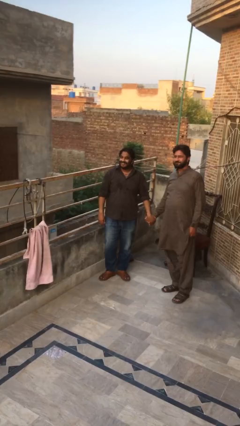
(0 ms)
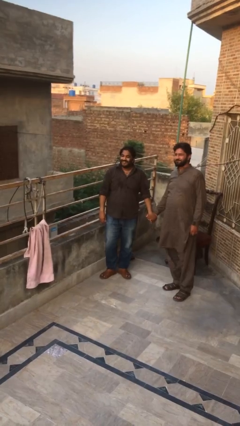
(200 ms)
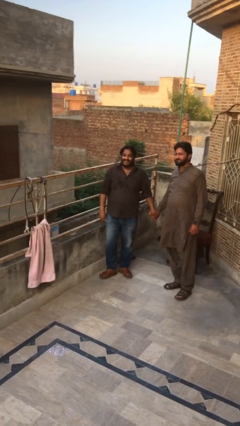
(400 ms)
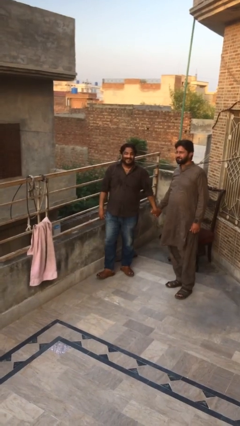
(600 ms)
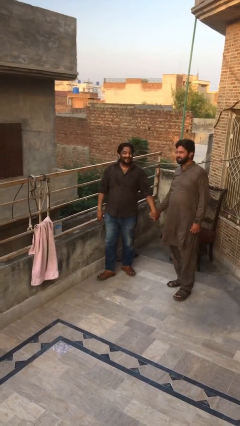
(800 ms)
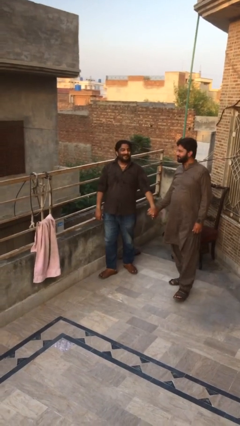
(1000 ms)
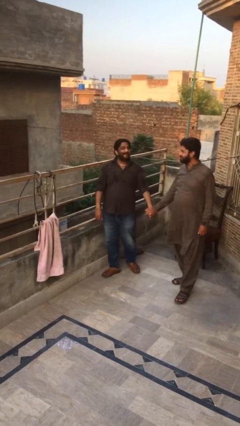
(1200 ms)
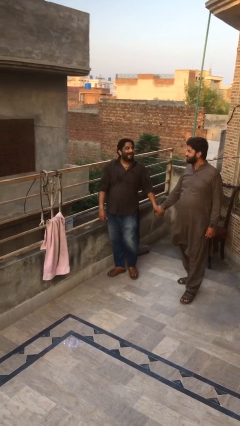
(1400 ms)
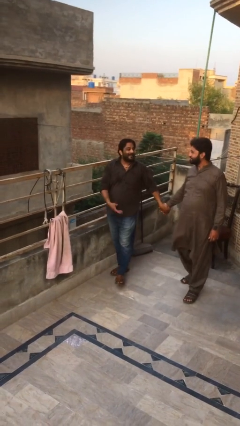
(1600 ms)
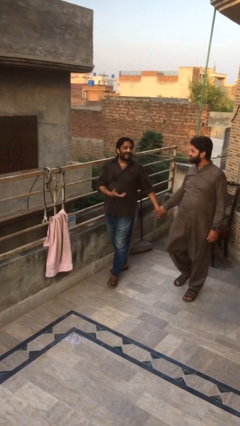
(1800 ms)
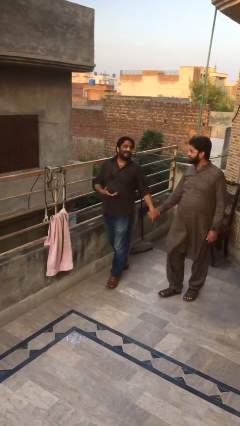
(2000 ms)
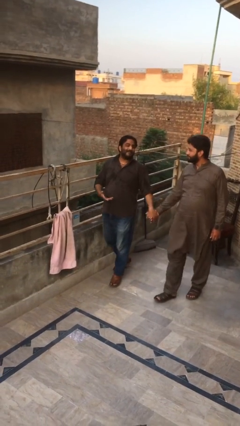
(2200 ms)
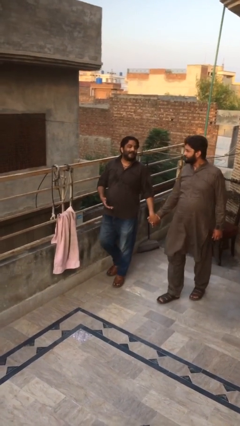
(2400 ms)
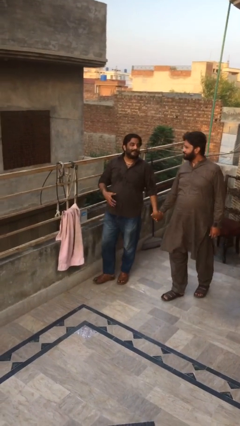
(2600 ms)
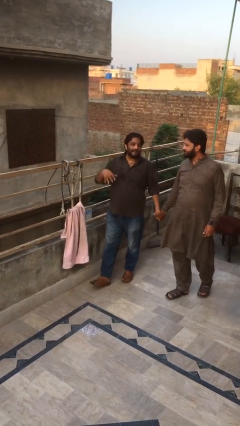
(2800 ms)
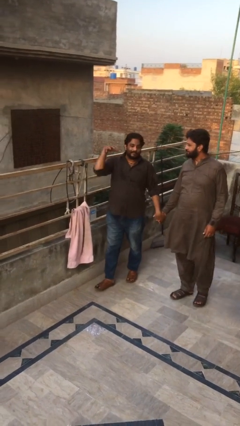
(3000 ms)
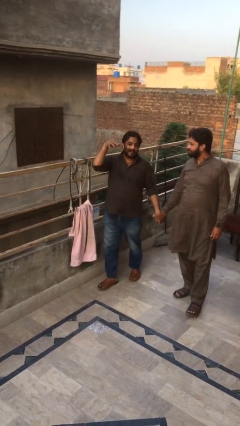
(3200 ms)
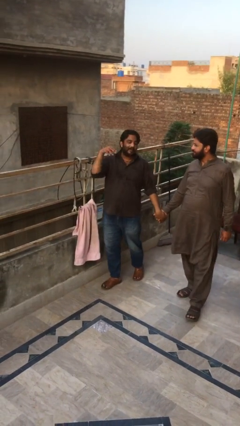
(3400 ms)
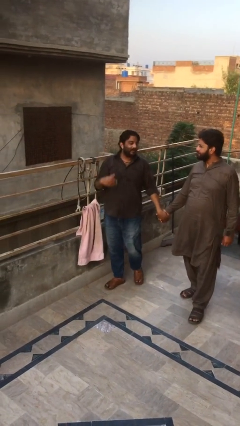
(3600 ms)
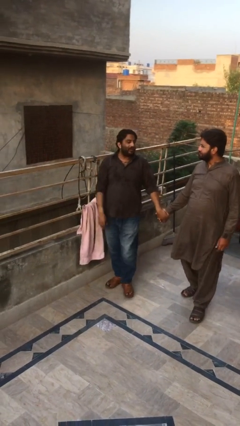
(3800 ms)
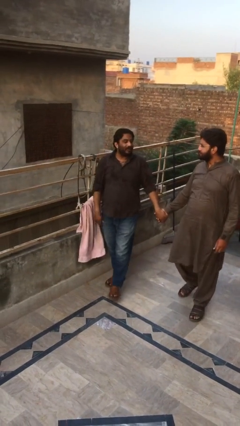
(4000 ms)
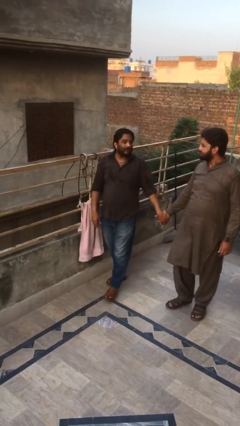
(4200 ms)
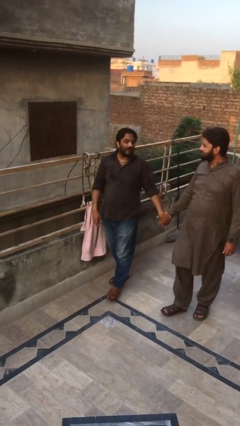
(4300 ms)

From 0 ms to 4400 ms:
person holds hand

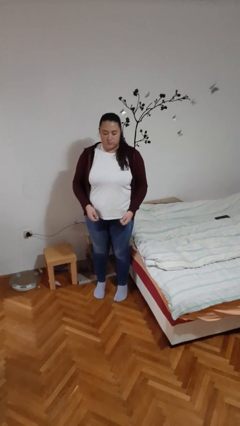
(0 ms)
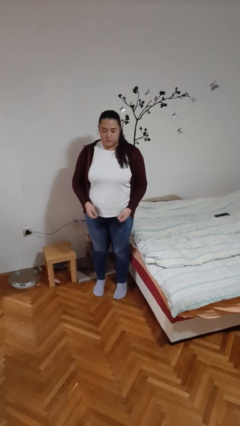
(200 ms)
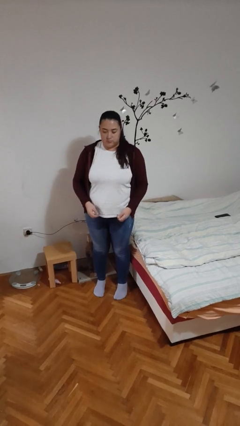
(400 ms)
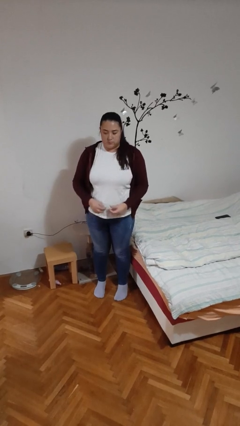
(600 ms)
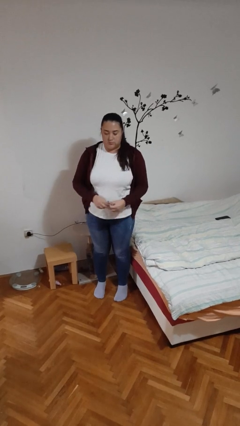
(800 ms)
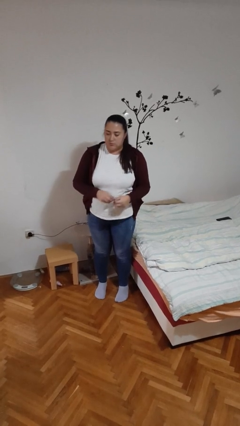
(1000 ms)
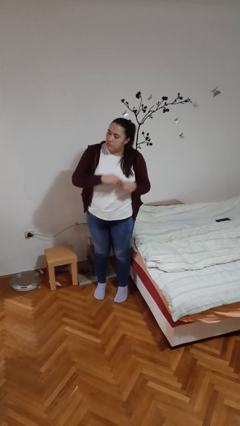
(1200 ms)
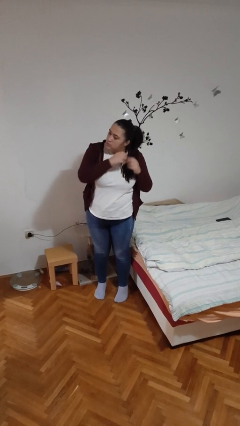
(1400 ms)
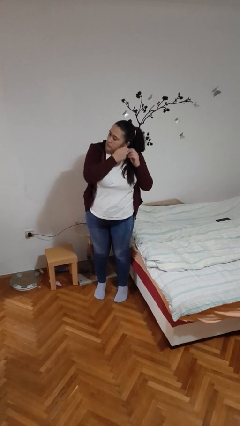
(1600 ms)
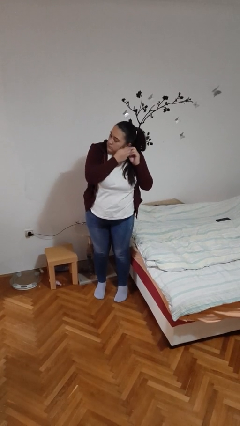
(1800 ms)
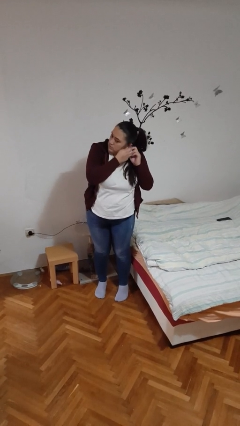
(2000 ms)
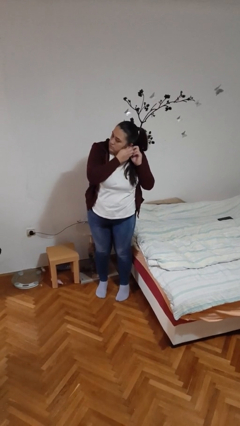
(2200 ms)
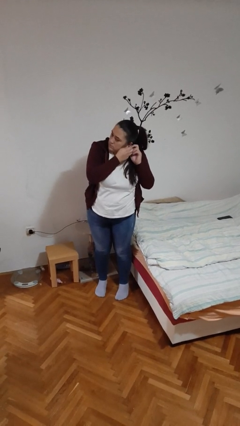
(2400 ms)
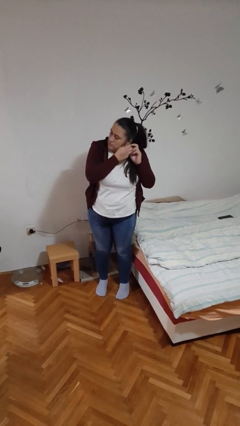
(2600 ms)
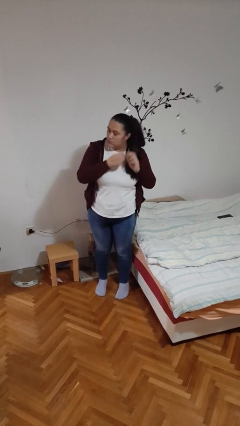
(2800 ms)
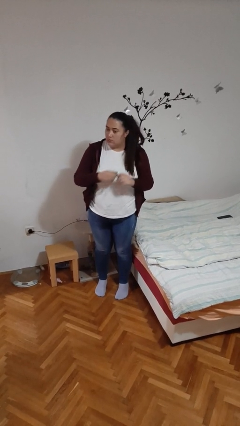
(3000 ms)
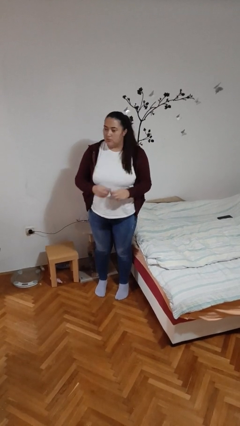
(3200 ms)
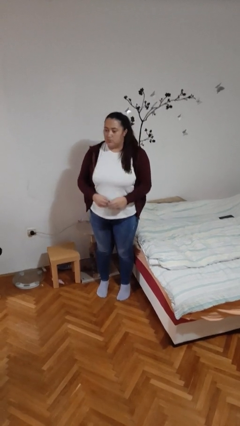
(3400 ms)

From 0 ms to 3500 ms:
person puts on earrings

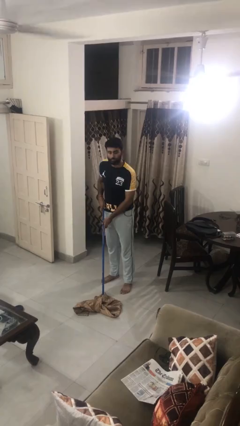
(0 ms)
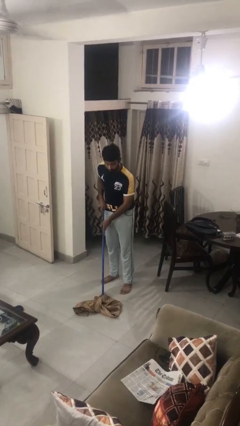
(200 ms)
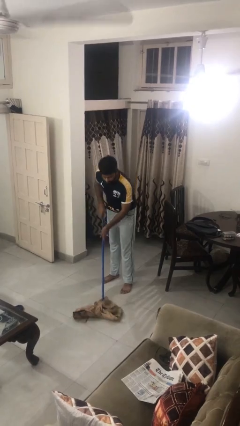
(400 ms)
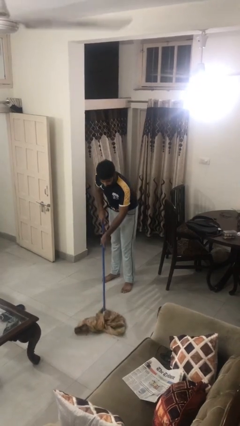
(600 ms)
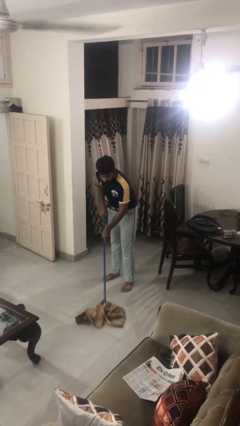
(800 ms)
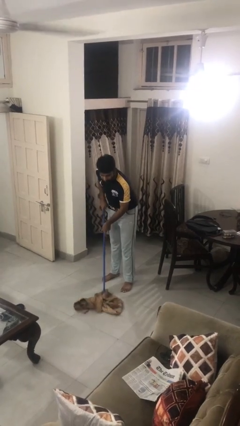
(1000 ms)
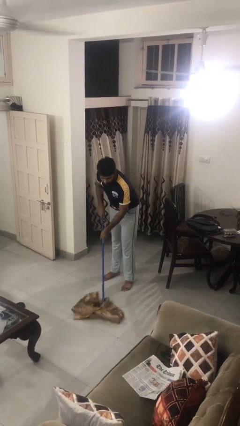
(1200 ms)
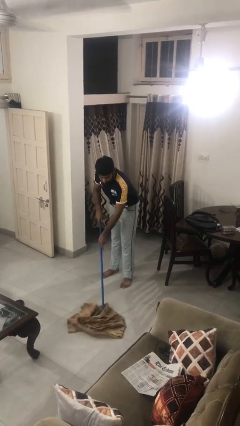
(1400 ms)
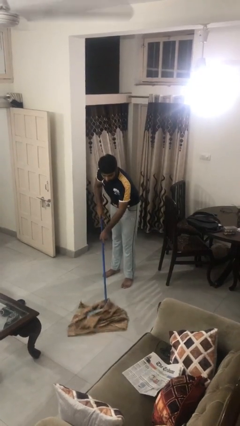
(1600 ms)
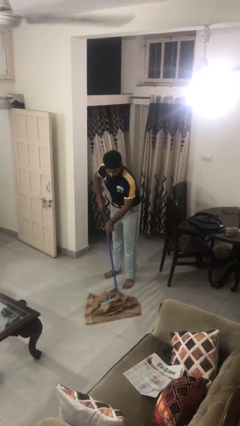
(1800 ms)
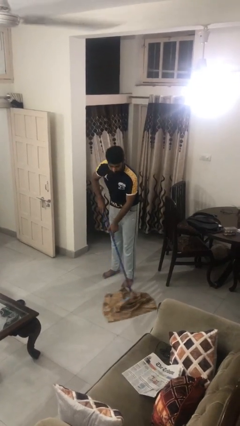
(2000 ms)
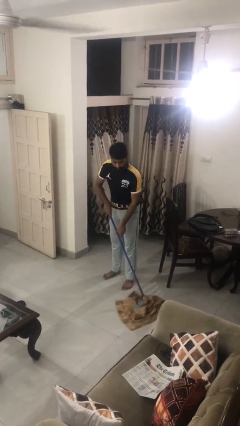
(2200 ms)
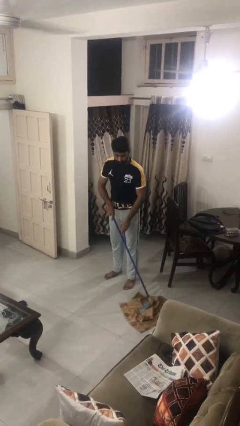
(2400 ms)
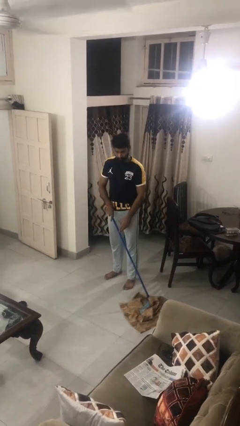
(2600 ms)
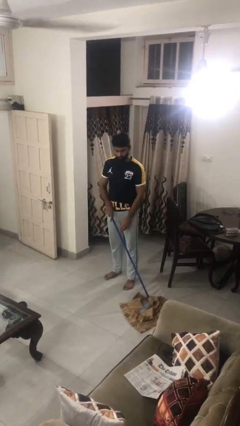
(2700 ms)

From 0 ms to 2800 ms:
person mops

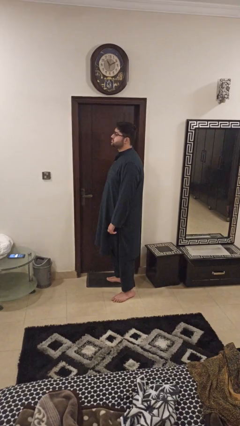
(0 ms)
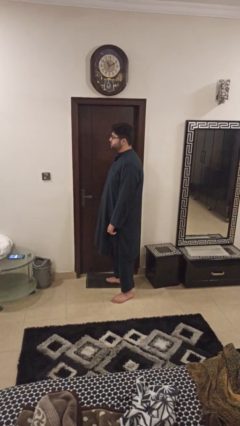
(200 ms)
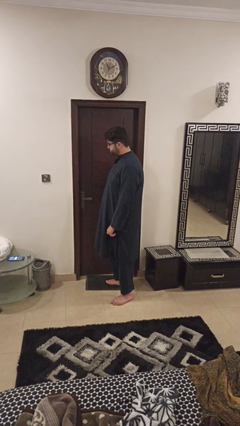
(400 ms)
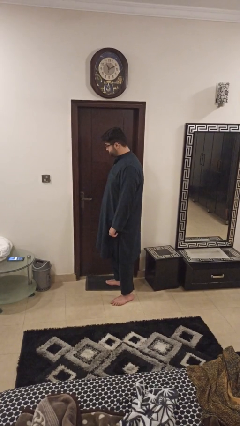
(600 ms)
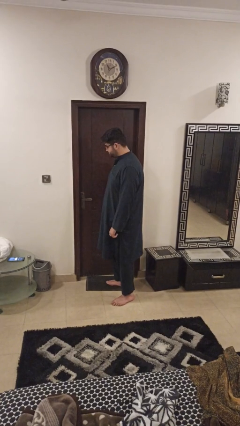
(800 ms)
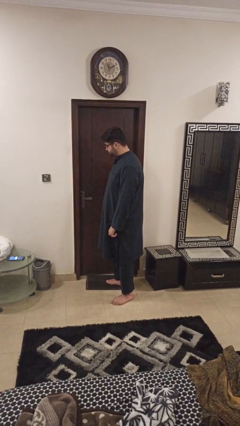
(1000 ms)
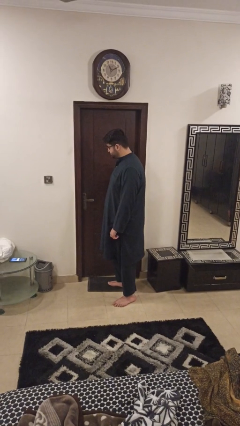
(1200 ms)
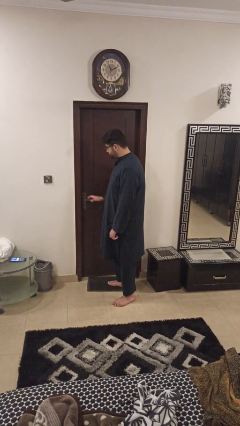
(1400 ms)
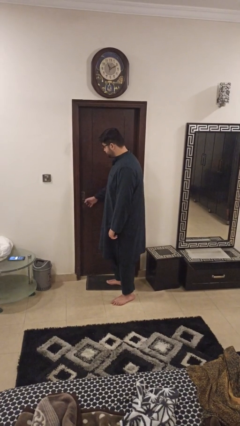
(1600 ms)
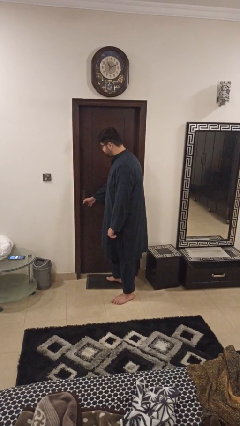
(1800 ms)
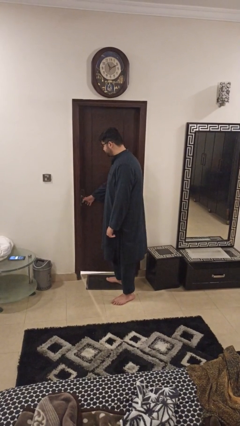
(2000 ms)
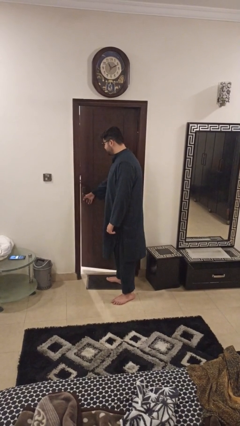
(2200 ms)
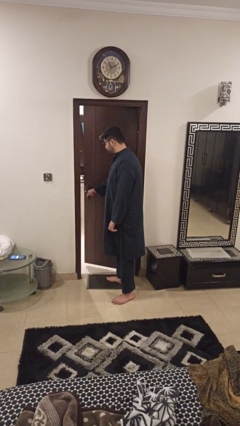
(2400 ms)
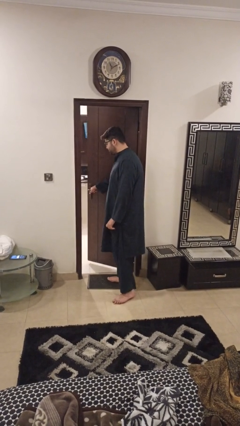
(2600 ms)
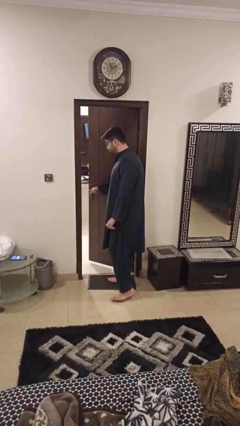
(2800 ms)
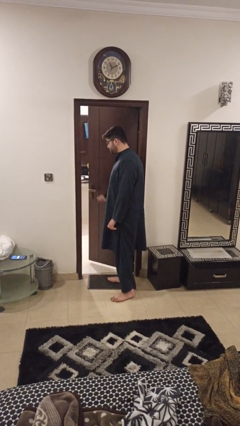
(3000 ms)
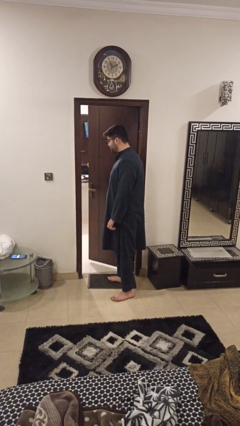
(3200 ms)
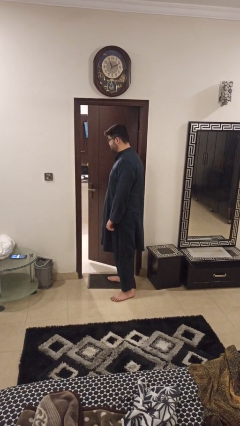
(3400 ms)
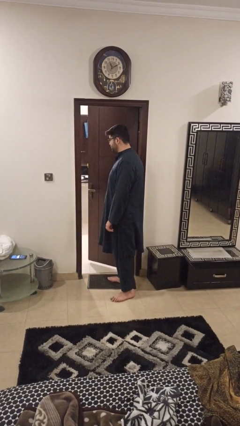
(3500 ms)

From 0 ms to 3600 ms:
person opens facility door

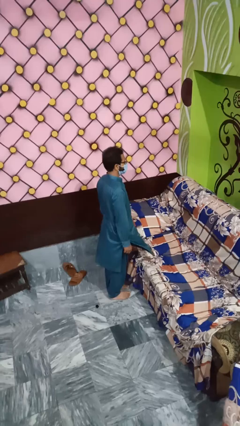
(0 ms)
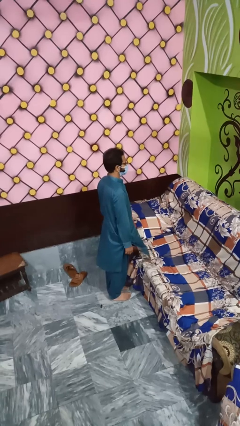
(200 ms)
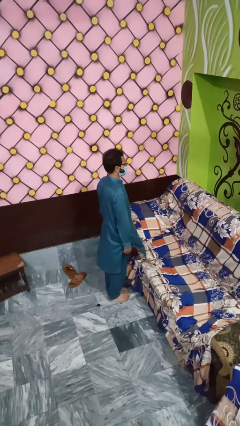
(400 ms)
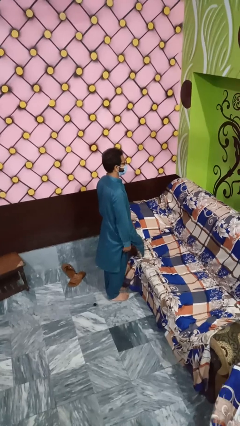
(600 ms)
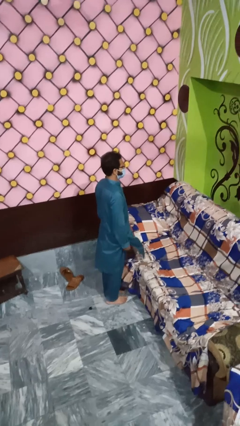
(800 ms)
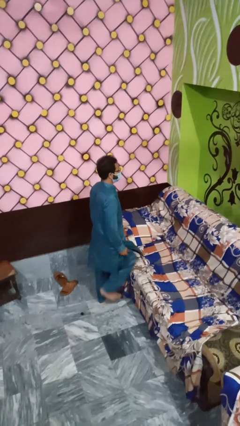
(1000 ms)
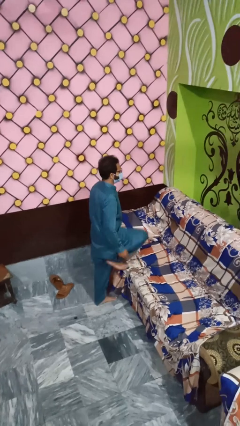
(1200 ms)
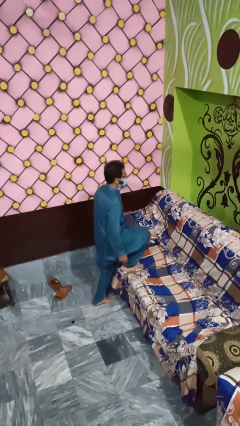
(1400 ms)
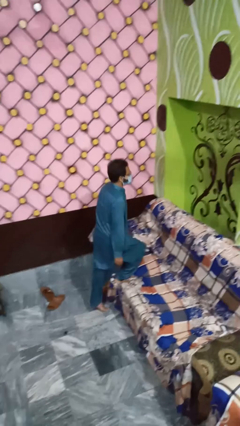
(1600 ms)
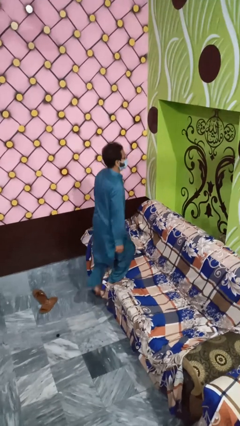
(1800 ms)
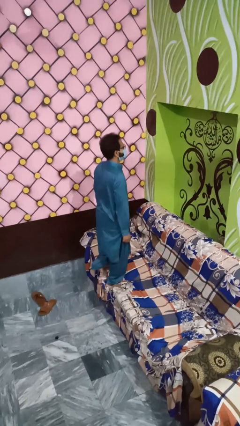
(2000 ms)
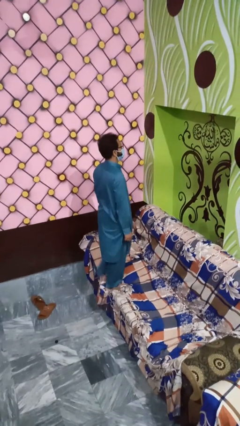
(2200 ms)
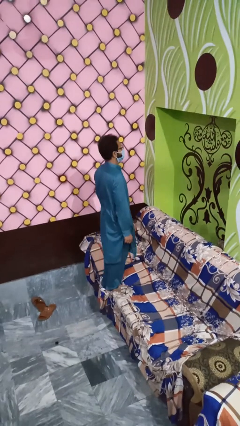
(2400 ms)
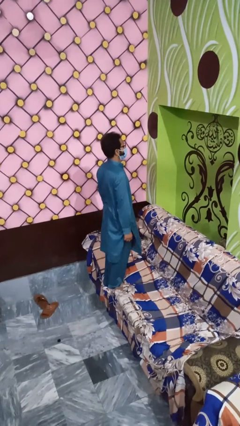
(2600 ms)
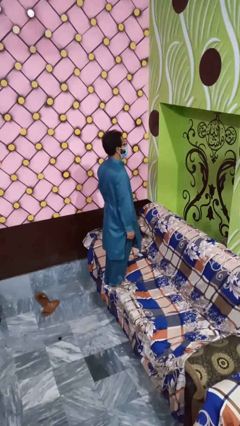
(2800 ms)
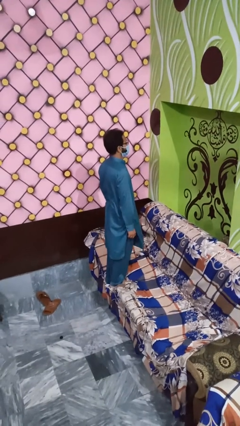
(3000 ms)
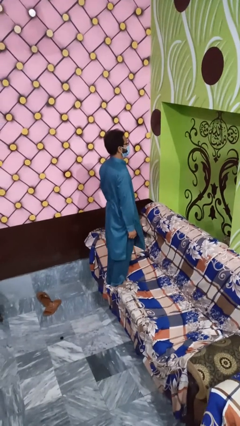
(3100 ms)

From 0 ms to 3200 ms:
person climbs on couch

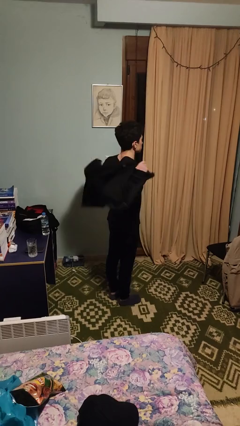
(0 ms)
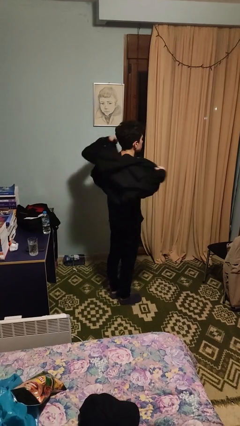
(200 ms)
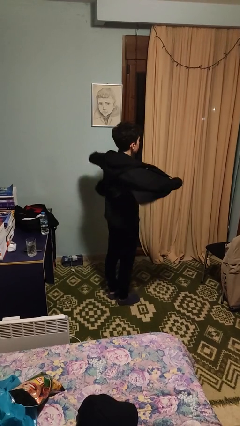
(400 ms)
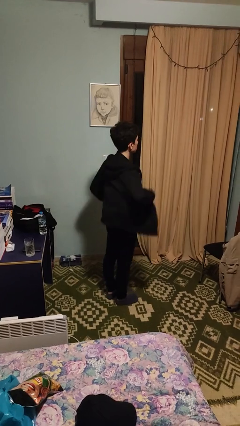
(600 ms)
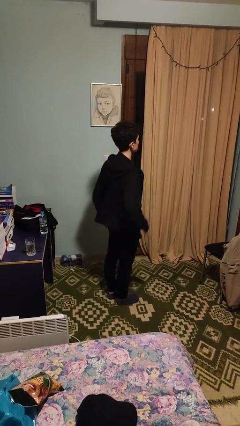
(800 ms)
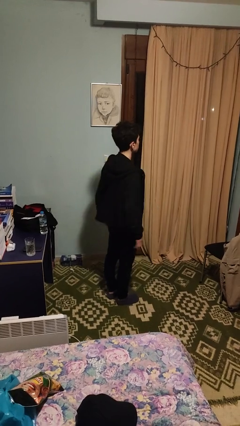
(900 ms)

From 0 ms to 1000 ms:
person puts on jacket
